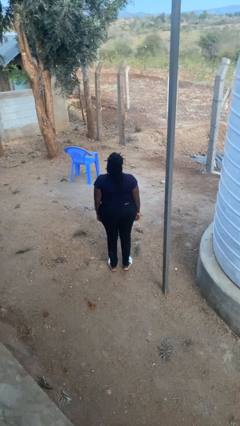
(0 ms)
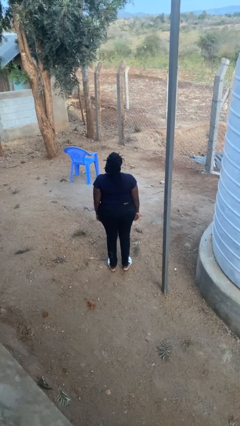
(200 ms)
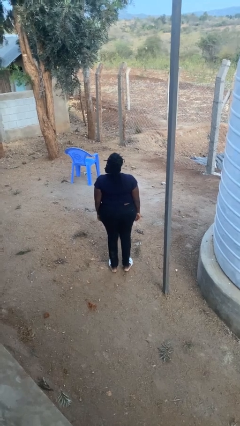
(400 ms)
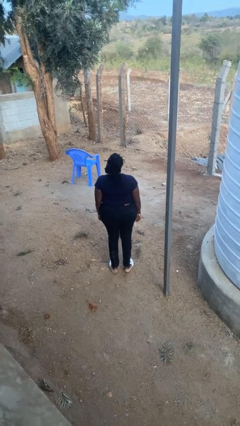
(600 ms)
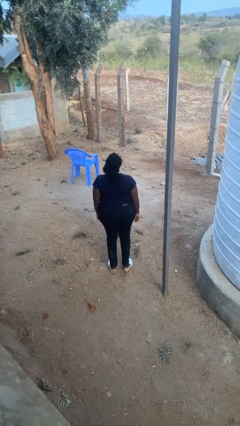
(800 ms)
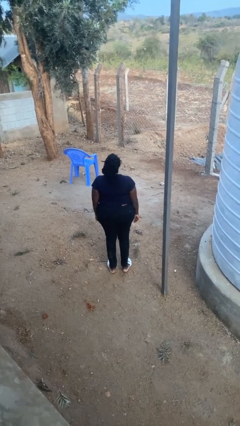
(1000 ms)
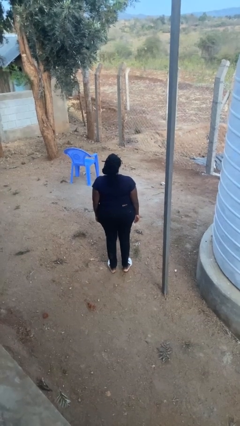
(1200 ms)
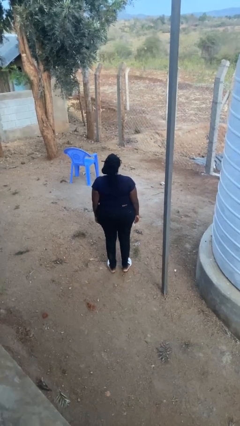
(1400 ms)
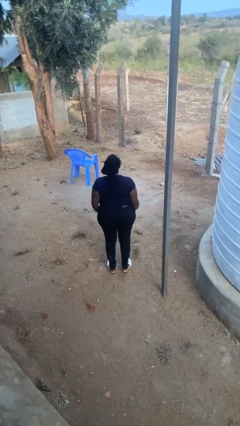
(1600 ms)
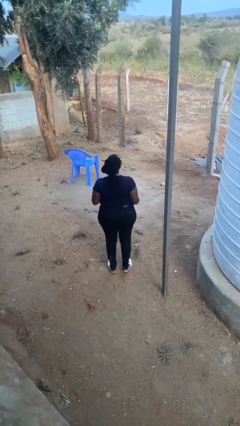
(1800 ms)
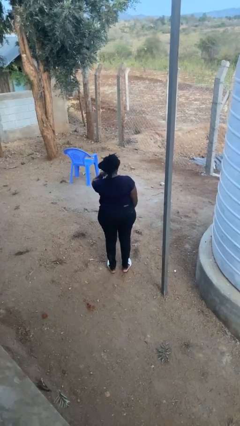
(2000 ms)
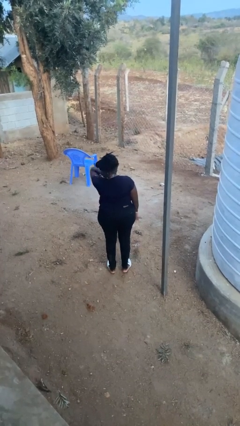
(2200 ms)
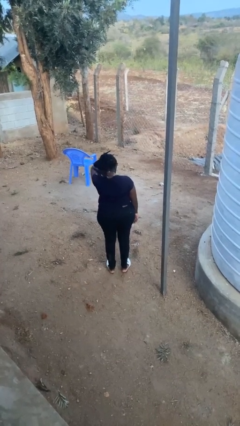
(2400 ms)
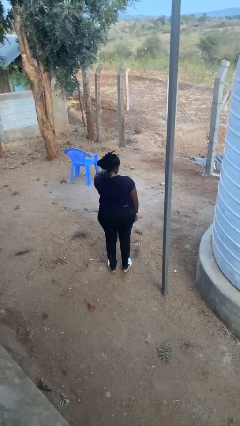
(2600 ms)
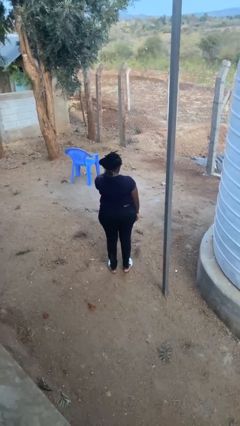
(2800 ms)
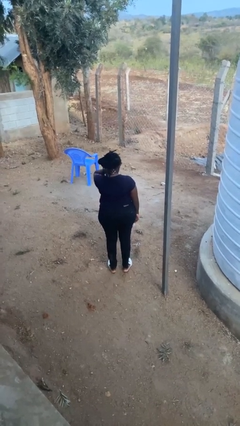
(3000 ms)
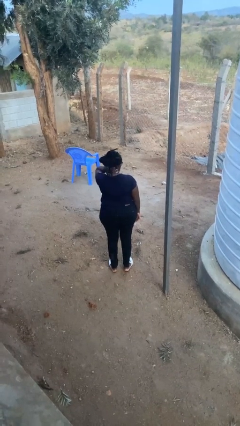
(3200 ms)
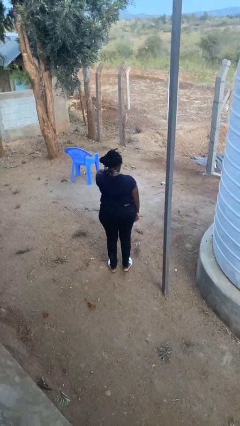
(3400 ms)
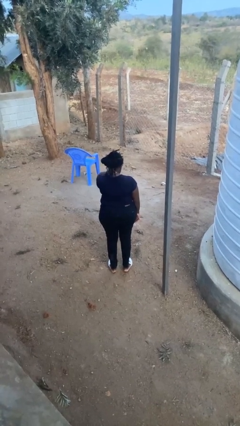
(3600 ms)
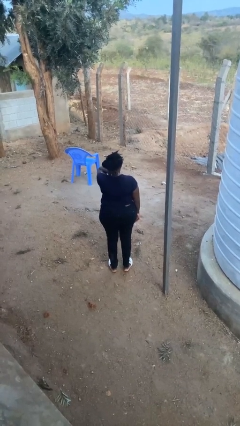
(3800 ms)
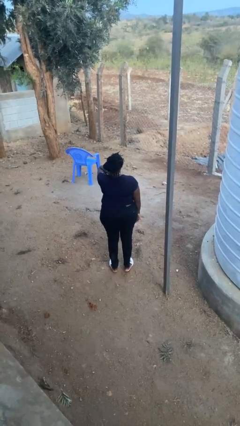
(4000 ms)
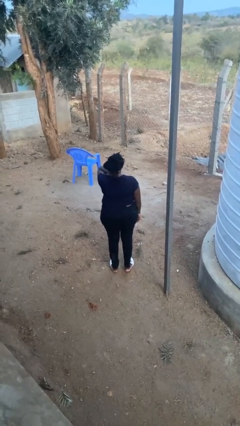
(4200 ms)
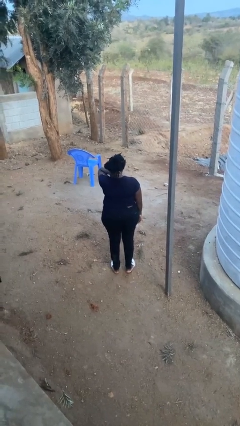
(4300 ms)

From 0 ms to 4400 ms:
person rubs neck

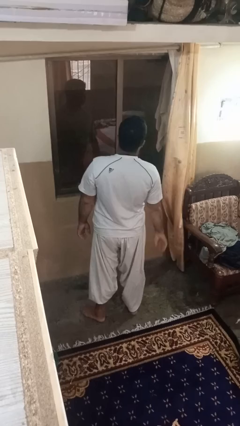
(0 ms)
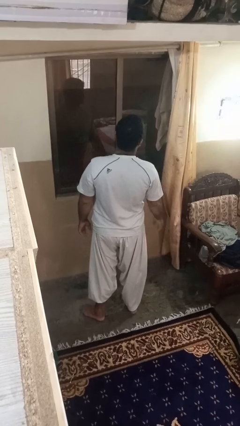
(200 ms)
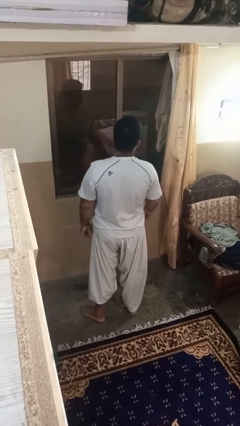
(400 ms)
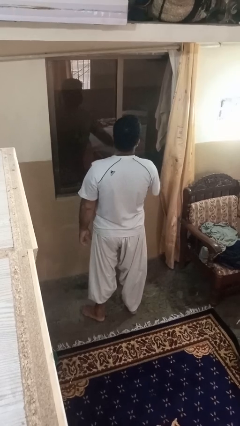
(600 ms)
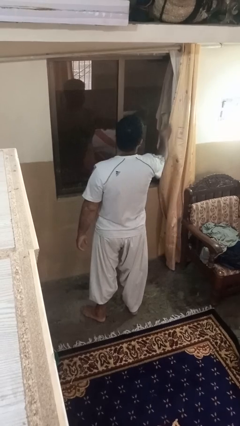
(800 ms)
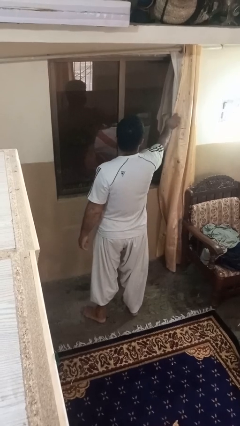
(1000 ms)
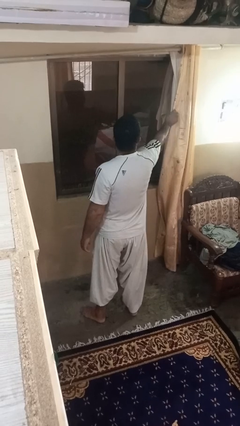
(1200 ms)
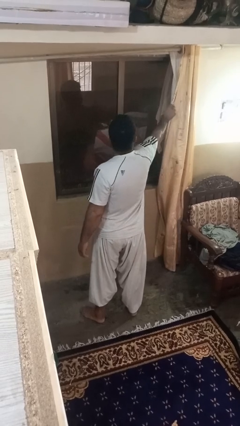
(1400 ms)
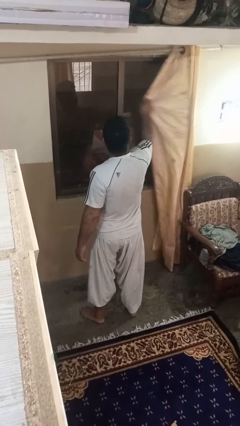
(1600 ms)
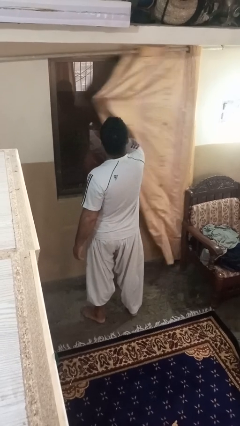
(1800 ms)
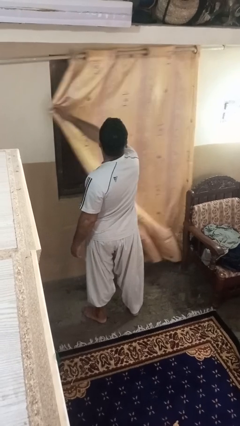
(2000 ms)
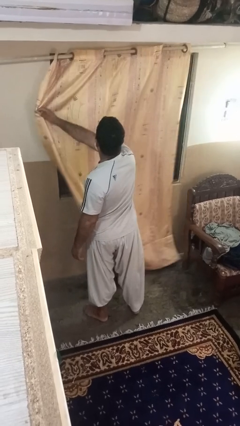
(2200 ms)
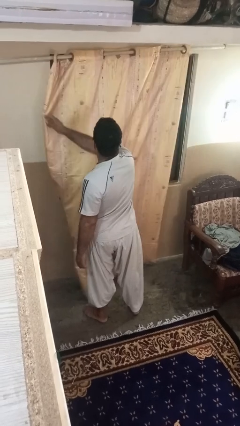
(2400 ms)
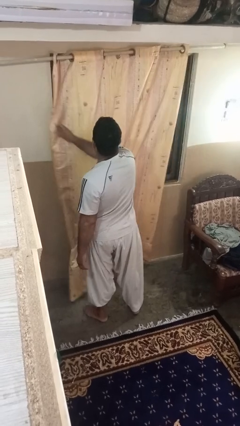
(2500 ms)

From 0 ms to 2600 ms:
person closes curtains

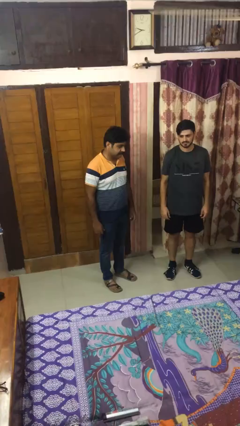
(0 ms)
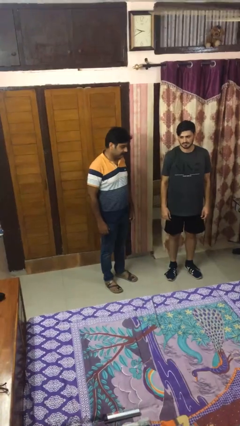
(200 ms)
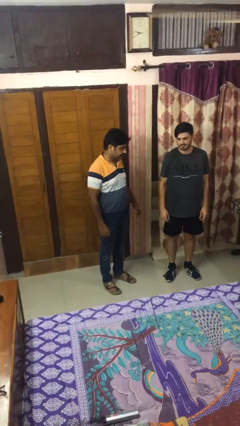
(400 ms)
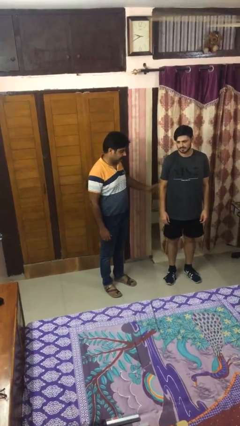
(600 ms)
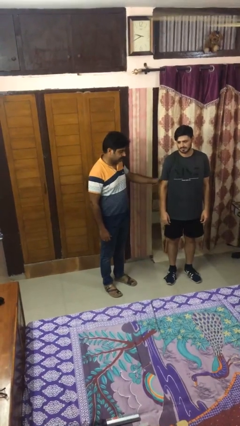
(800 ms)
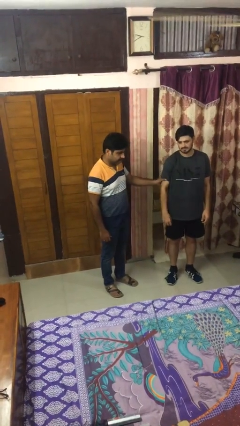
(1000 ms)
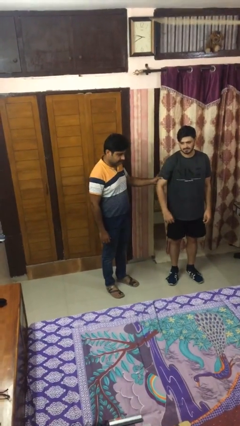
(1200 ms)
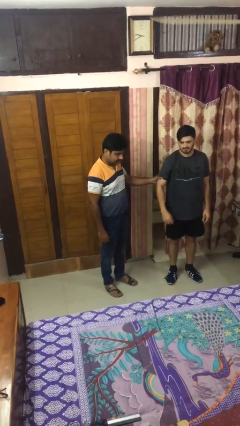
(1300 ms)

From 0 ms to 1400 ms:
person grabs person by bicep

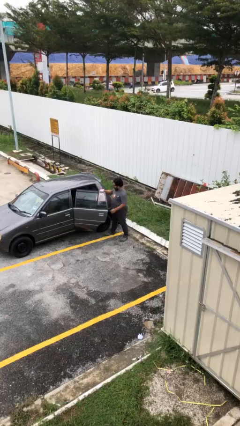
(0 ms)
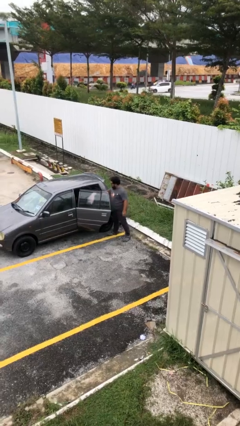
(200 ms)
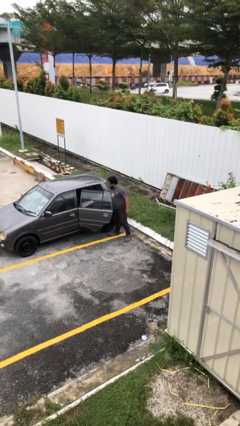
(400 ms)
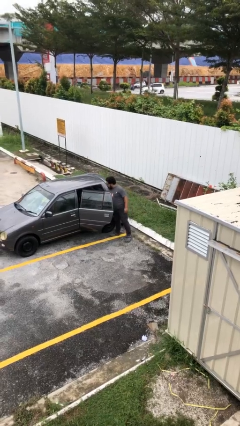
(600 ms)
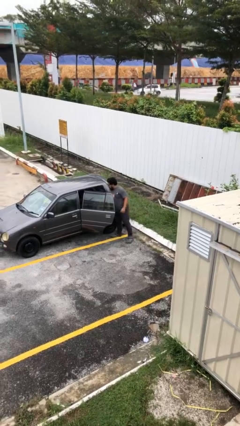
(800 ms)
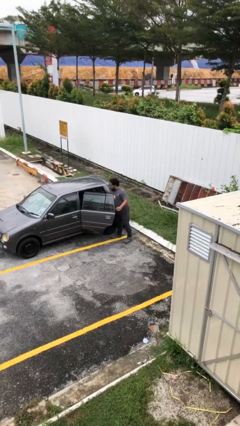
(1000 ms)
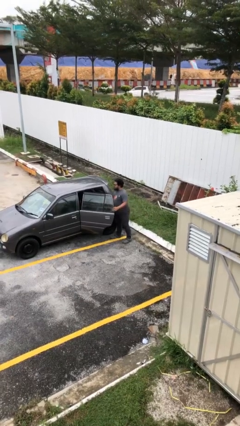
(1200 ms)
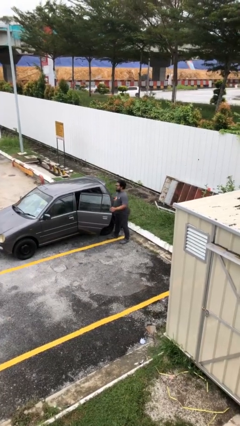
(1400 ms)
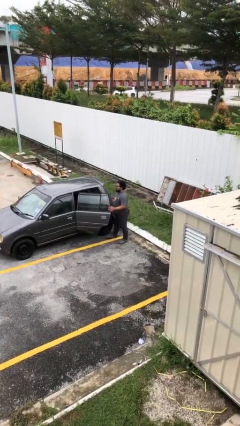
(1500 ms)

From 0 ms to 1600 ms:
person loads car

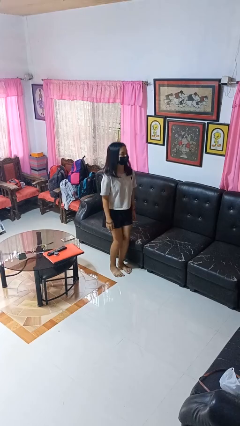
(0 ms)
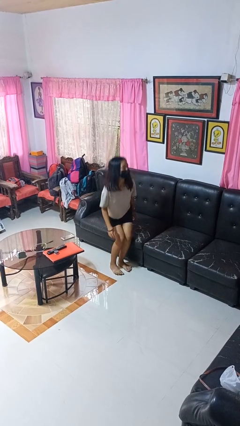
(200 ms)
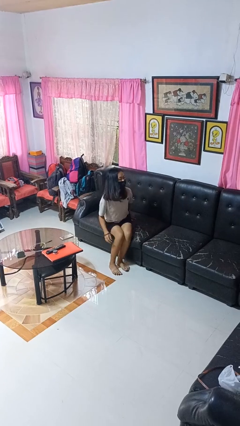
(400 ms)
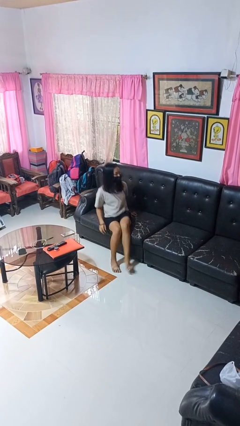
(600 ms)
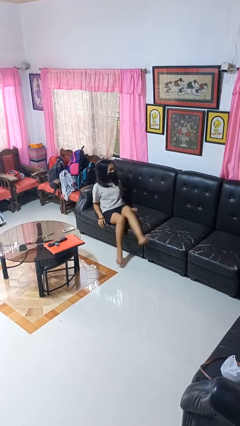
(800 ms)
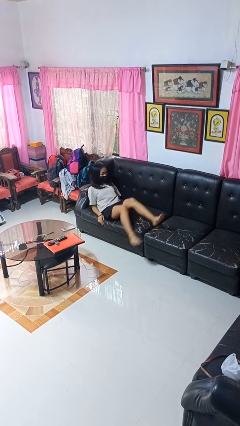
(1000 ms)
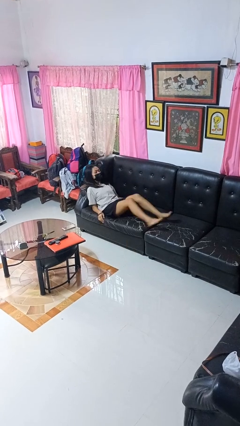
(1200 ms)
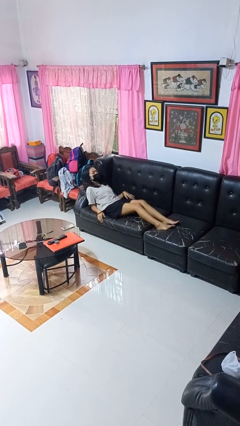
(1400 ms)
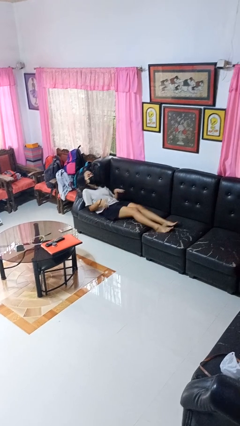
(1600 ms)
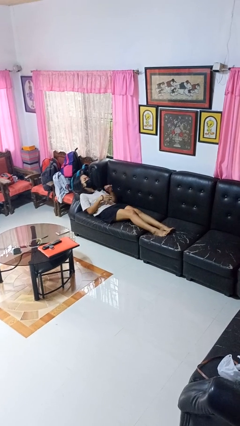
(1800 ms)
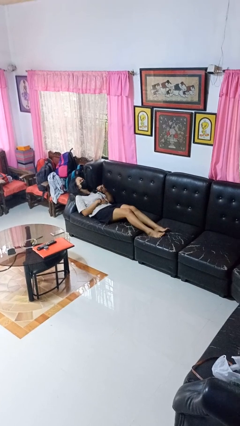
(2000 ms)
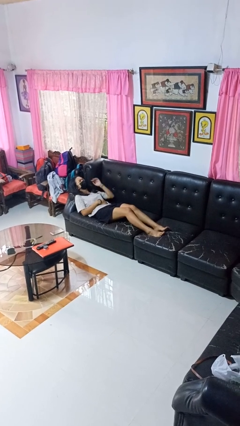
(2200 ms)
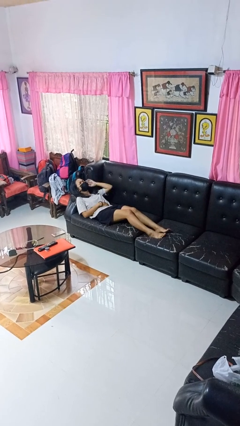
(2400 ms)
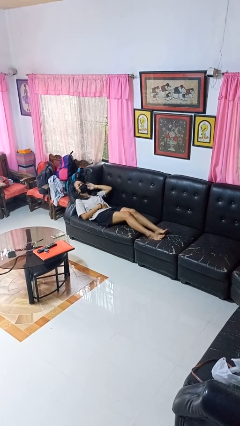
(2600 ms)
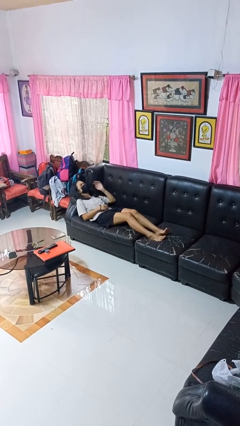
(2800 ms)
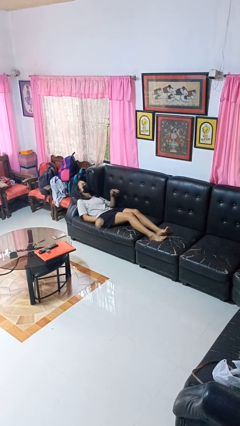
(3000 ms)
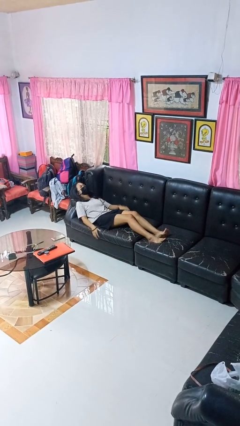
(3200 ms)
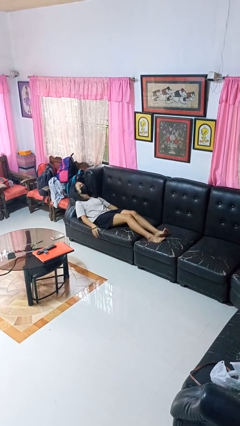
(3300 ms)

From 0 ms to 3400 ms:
person lies down on couch

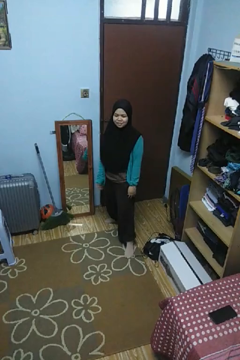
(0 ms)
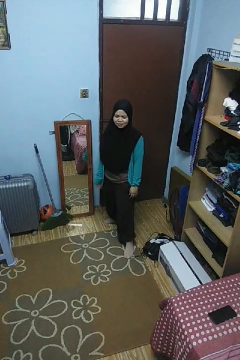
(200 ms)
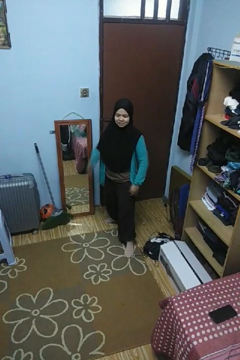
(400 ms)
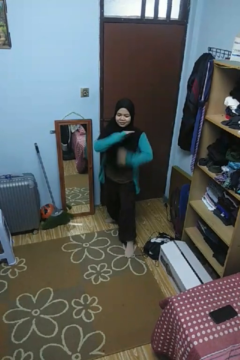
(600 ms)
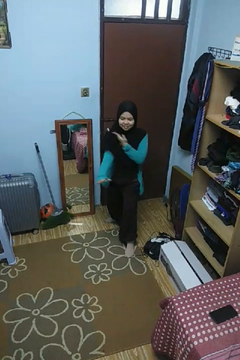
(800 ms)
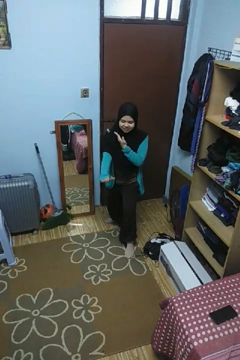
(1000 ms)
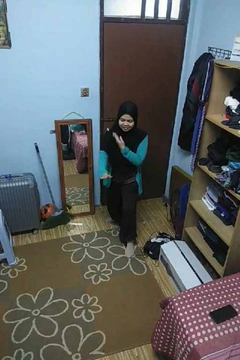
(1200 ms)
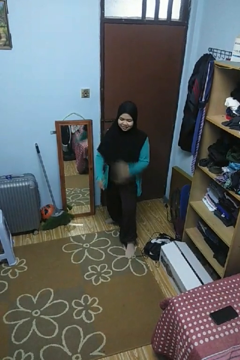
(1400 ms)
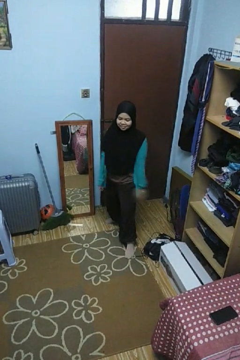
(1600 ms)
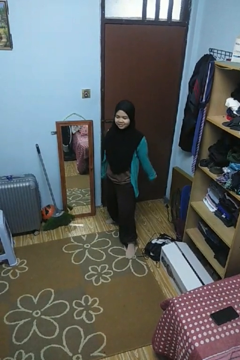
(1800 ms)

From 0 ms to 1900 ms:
person karate chop

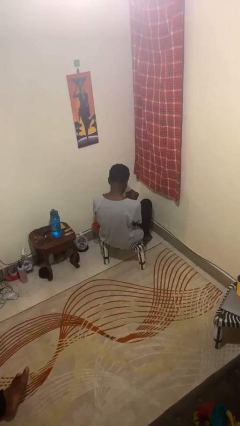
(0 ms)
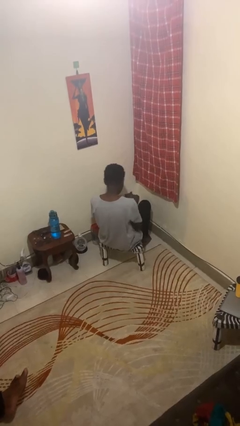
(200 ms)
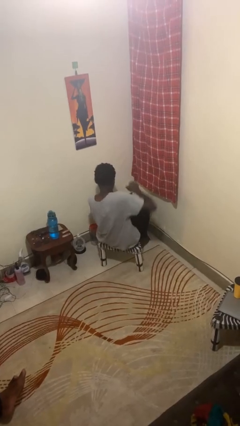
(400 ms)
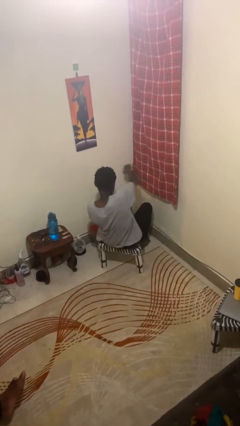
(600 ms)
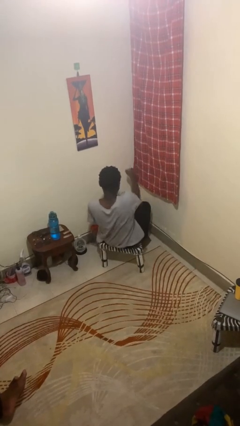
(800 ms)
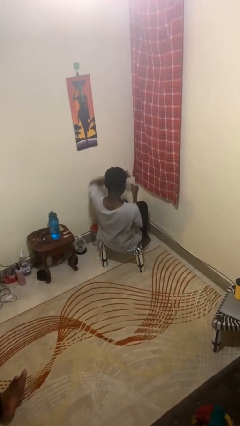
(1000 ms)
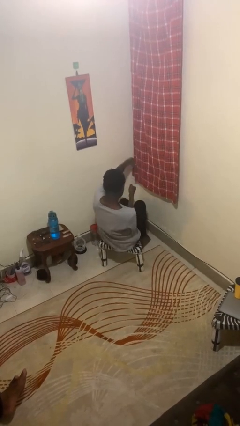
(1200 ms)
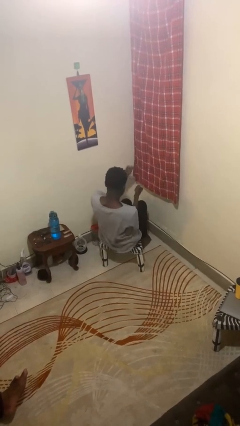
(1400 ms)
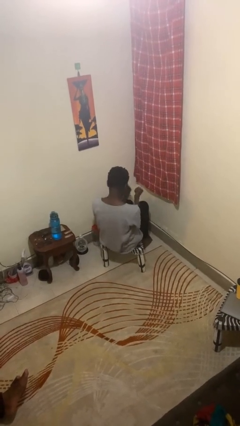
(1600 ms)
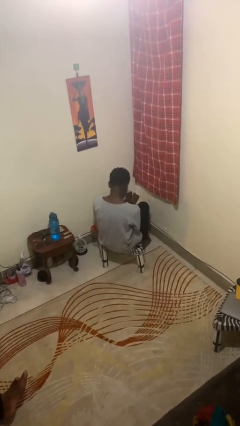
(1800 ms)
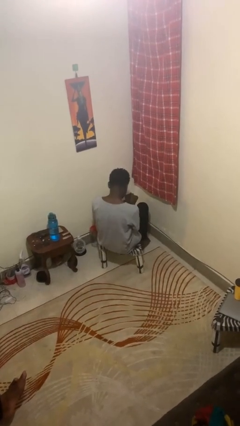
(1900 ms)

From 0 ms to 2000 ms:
person punches

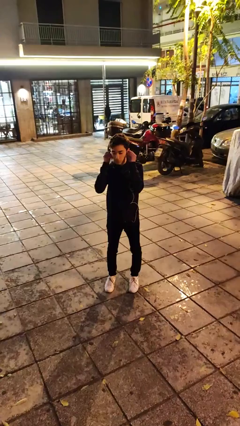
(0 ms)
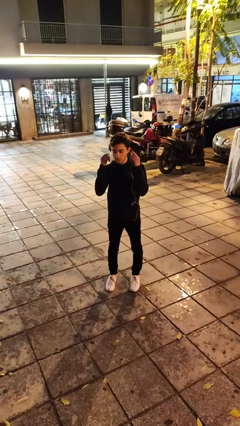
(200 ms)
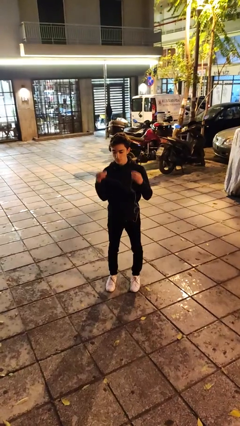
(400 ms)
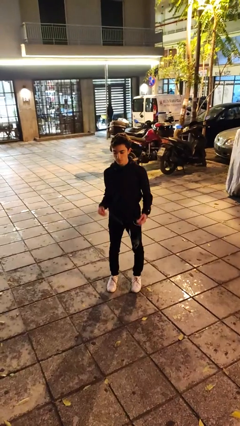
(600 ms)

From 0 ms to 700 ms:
person takes off headphones
